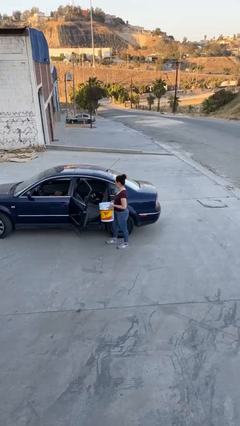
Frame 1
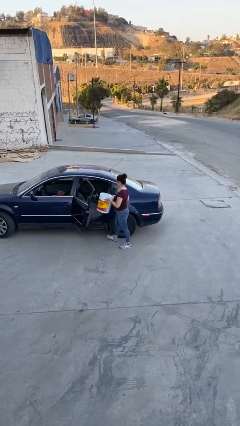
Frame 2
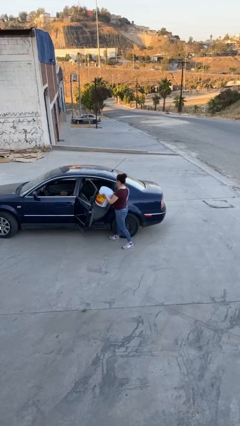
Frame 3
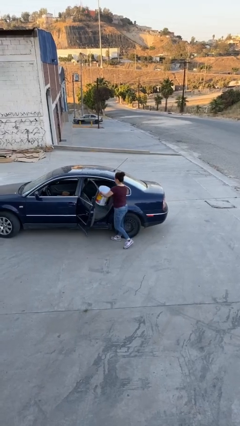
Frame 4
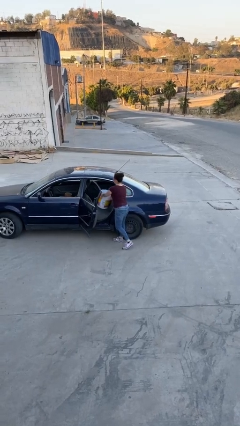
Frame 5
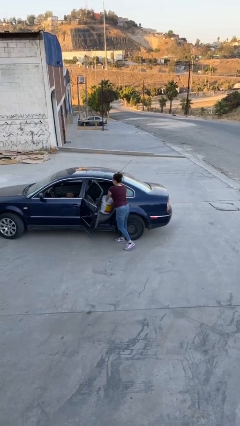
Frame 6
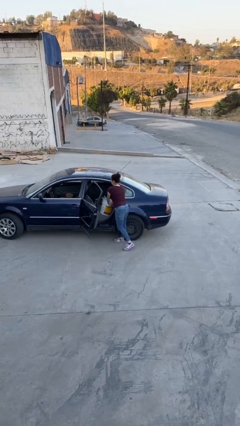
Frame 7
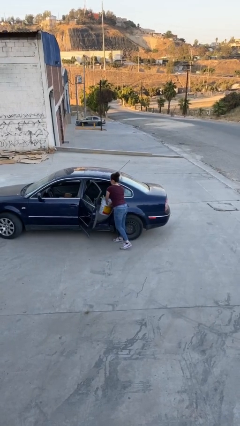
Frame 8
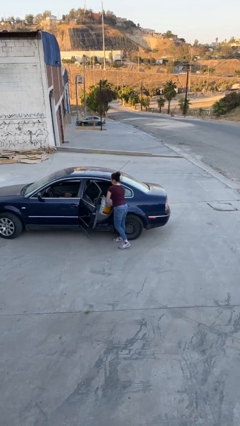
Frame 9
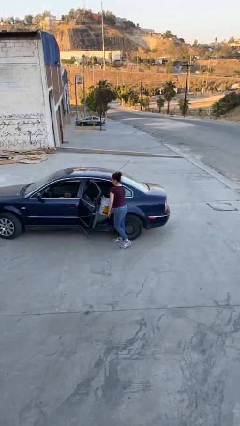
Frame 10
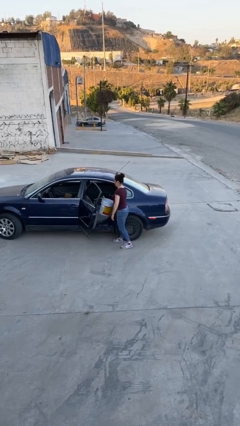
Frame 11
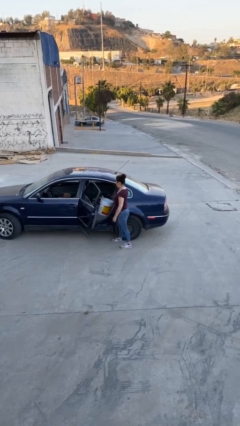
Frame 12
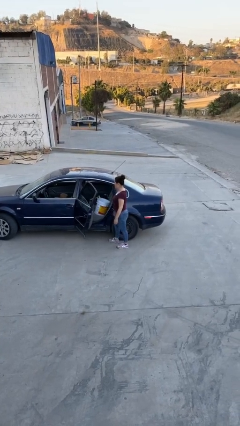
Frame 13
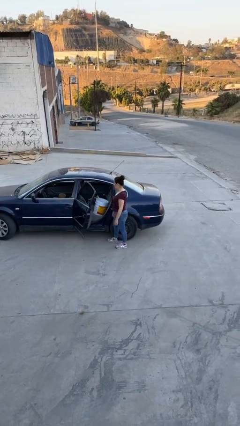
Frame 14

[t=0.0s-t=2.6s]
person loads car

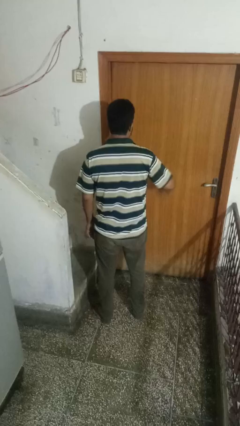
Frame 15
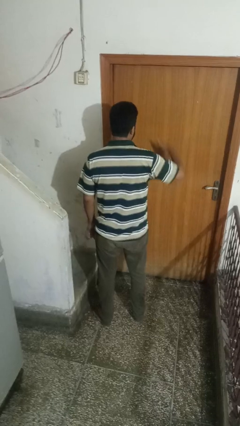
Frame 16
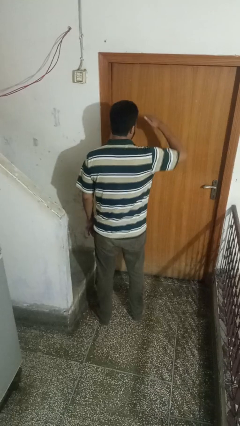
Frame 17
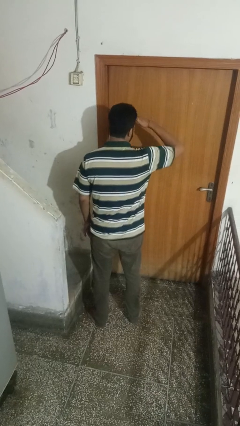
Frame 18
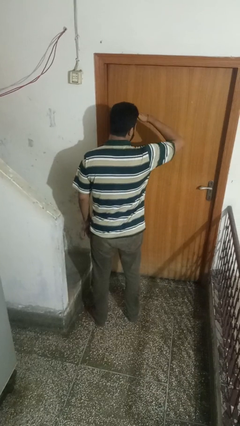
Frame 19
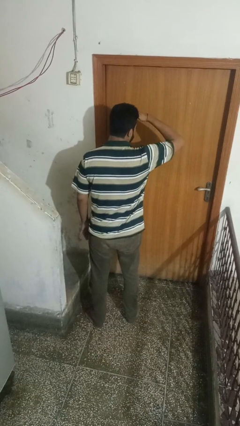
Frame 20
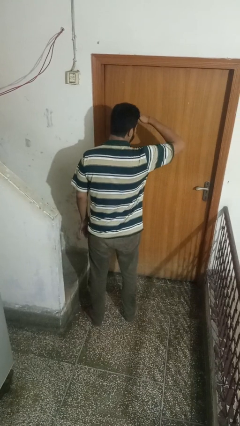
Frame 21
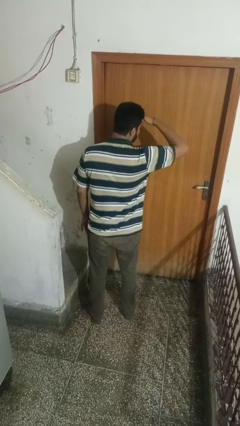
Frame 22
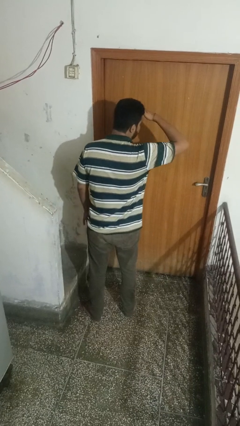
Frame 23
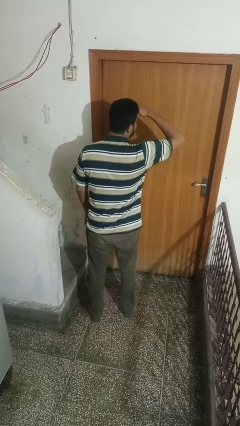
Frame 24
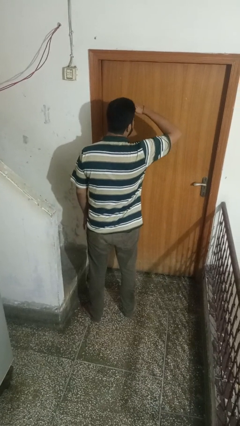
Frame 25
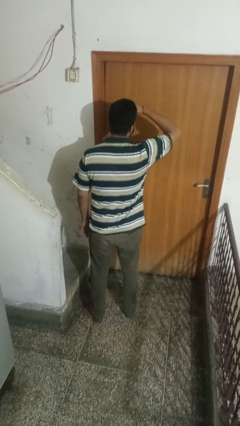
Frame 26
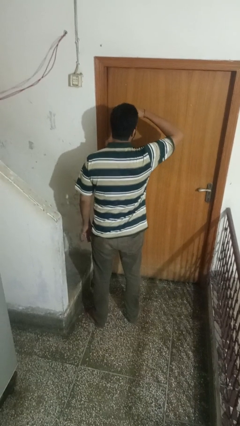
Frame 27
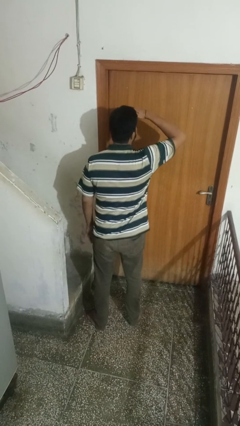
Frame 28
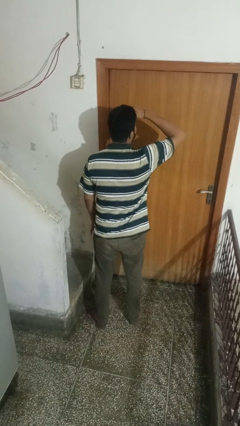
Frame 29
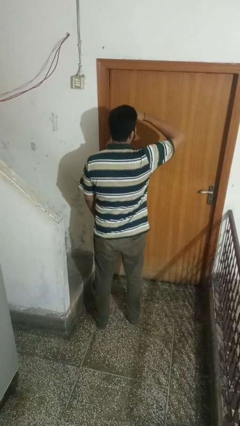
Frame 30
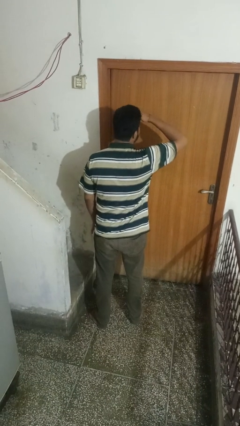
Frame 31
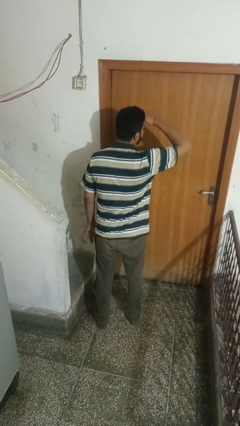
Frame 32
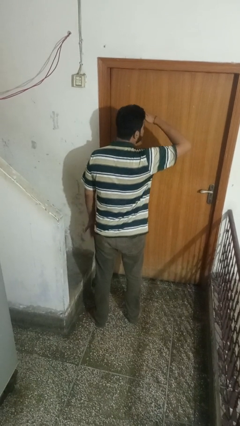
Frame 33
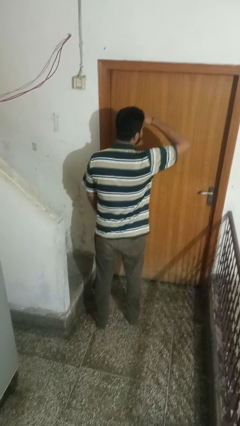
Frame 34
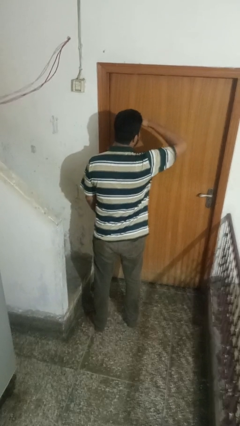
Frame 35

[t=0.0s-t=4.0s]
person shades eyes

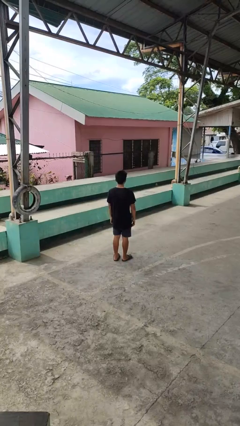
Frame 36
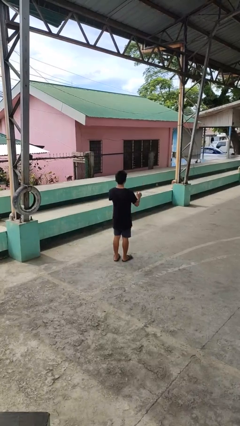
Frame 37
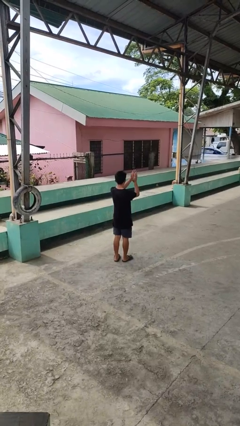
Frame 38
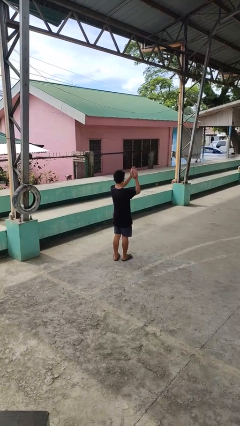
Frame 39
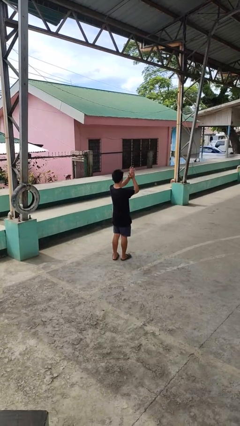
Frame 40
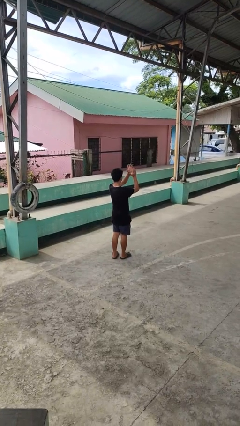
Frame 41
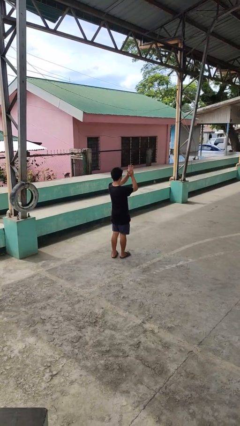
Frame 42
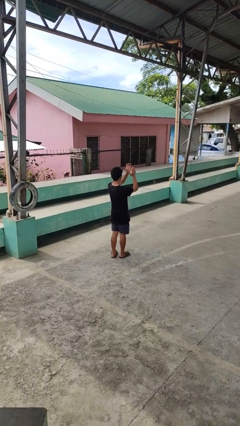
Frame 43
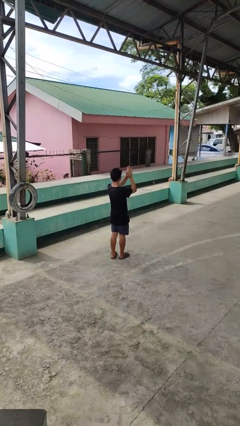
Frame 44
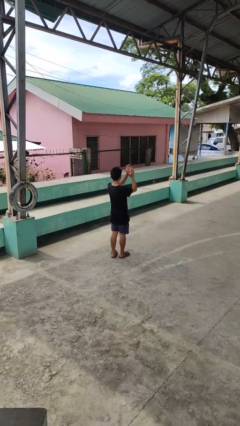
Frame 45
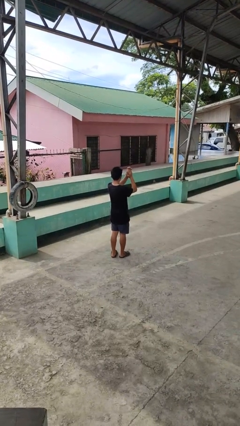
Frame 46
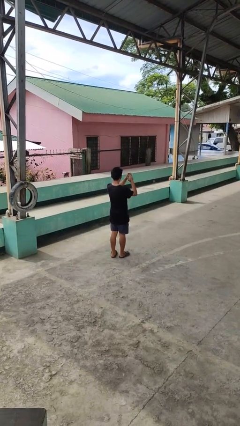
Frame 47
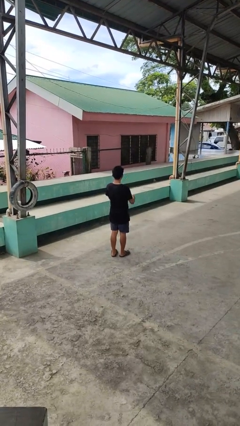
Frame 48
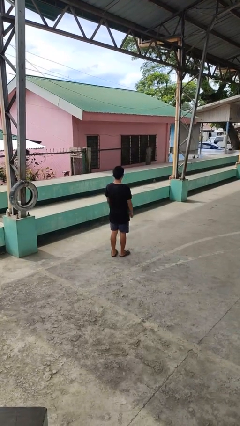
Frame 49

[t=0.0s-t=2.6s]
person claps hands

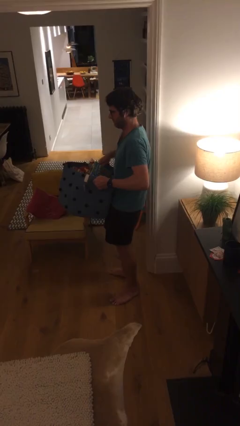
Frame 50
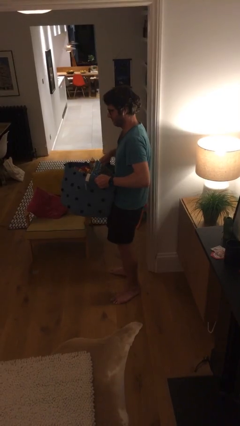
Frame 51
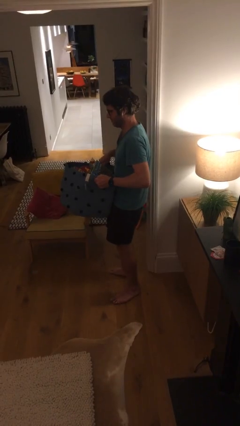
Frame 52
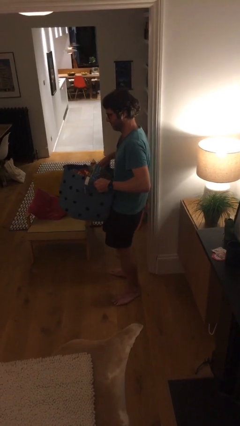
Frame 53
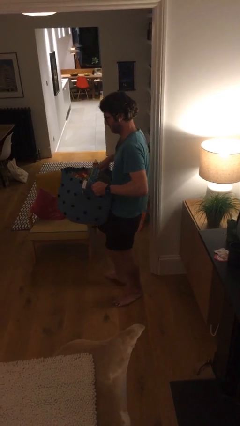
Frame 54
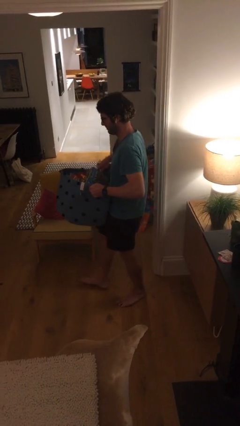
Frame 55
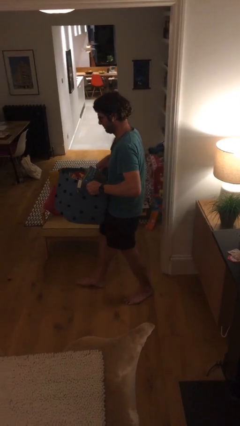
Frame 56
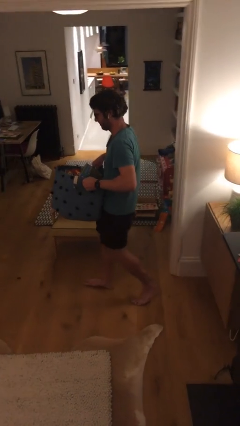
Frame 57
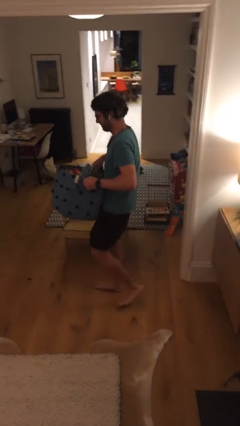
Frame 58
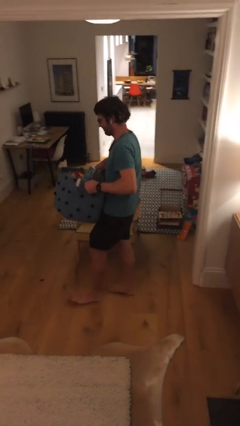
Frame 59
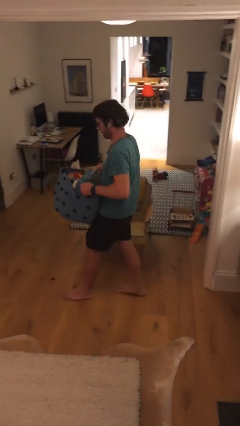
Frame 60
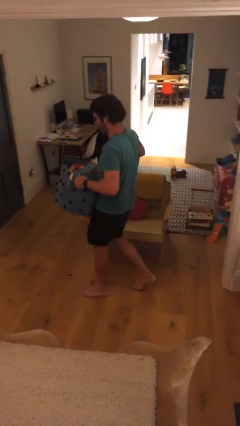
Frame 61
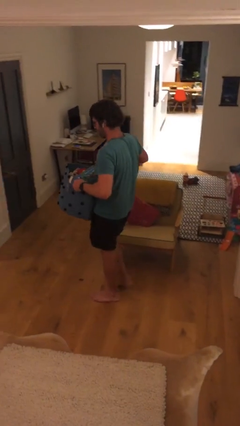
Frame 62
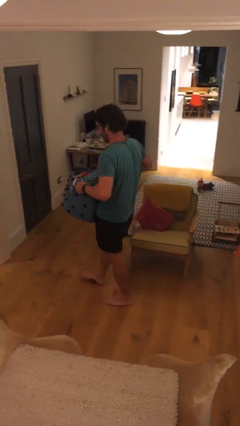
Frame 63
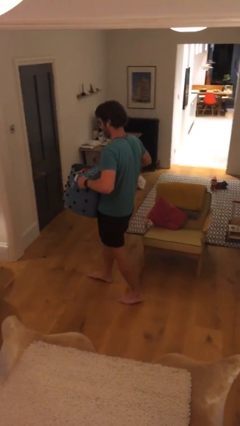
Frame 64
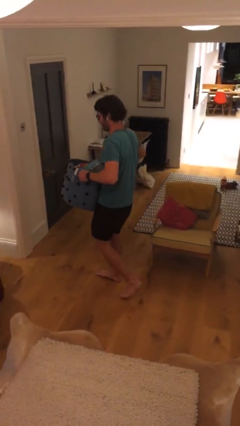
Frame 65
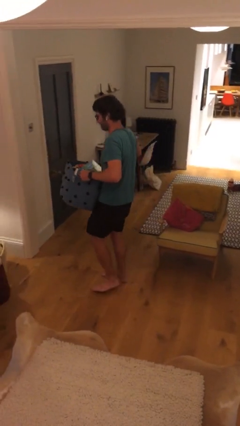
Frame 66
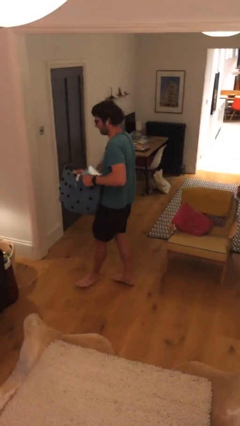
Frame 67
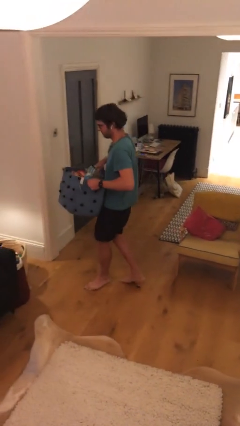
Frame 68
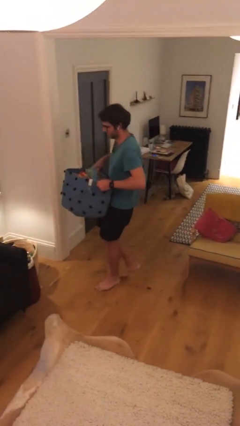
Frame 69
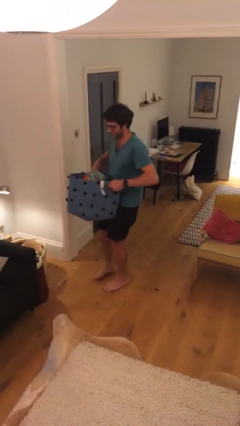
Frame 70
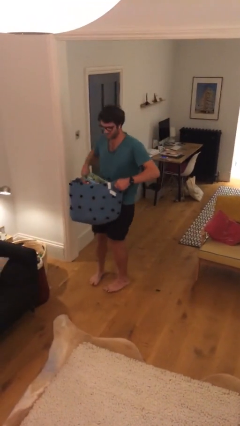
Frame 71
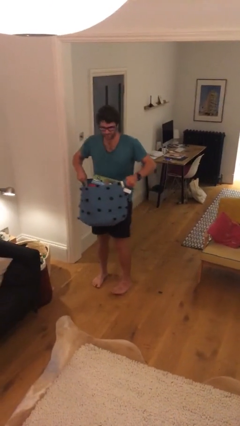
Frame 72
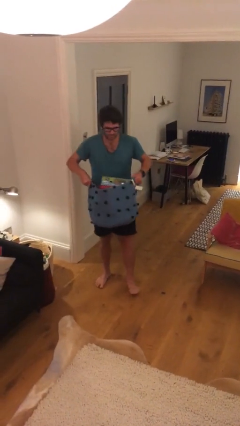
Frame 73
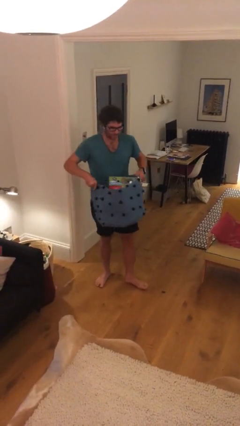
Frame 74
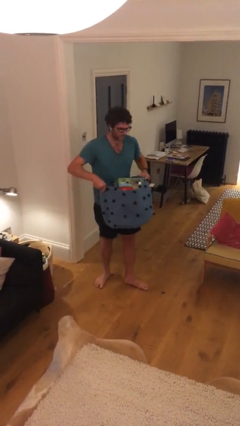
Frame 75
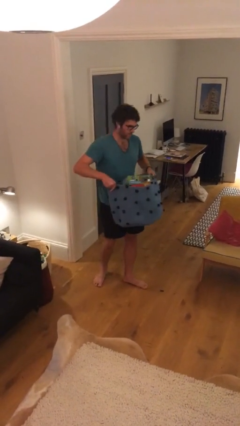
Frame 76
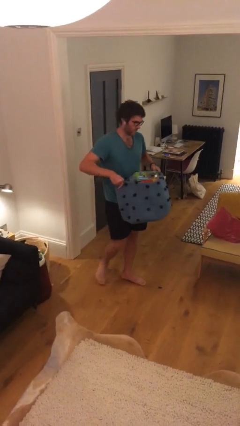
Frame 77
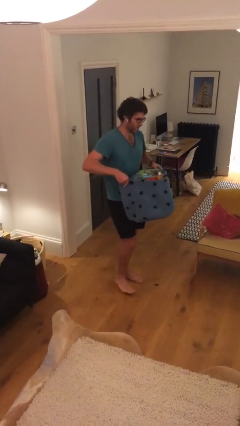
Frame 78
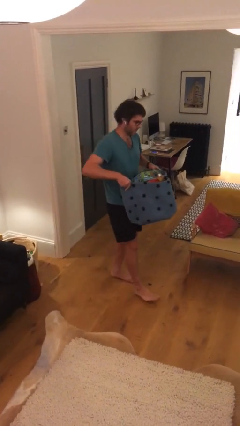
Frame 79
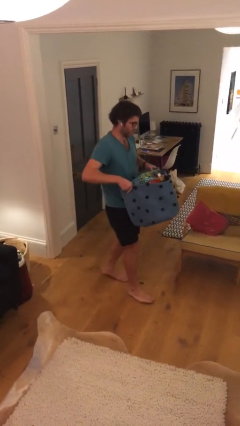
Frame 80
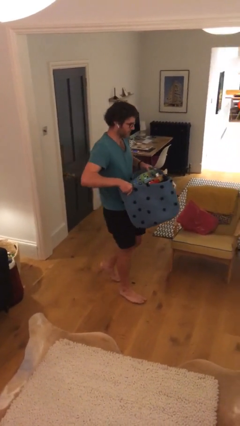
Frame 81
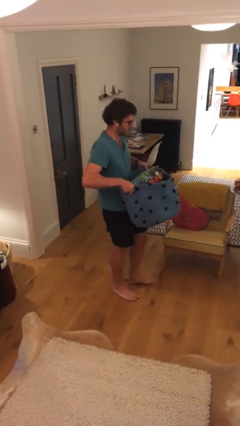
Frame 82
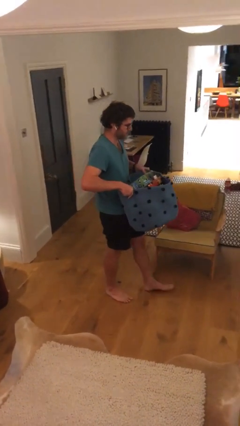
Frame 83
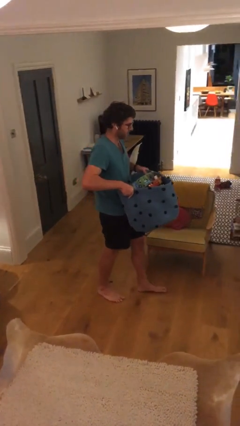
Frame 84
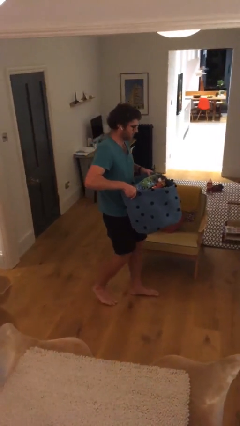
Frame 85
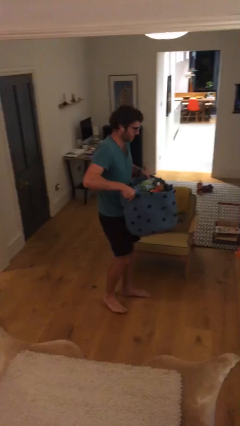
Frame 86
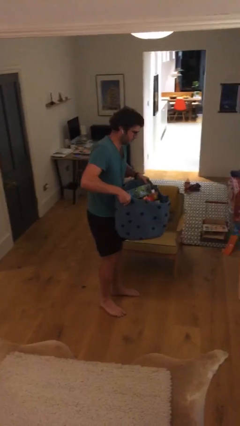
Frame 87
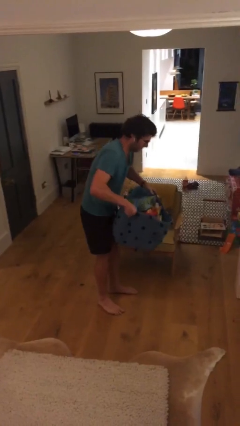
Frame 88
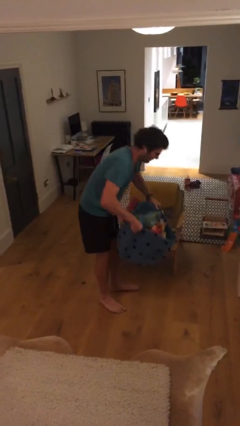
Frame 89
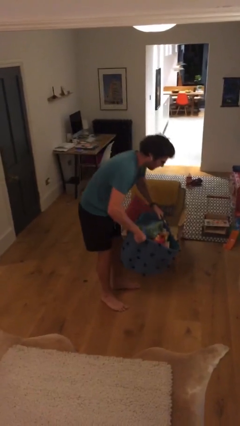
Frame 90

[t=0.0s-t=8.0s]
person carries heavy object

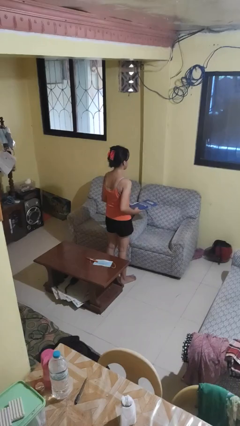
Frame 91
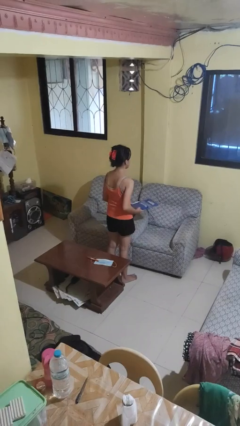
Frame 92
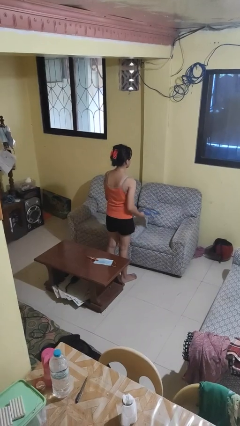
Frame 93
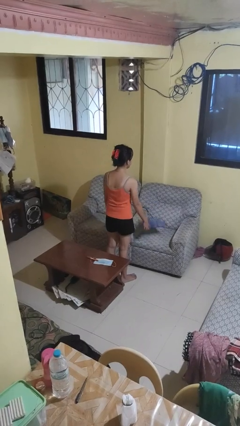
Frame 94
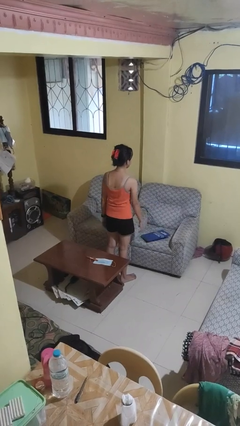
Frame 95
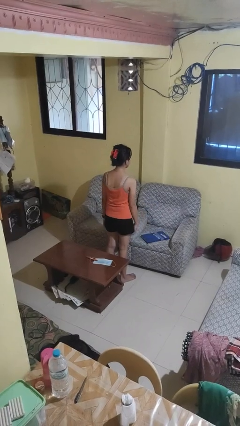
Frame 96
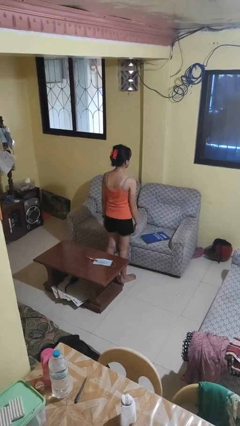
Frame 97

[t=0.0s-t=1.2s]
person puts down object on couch
